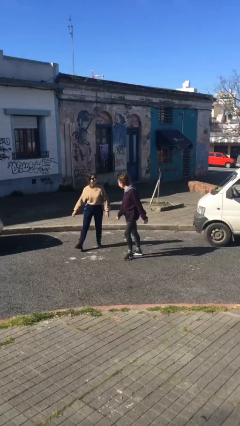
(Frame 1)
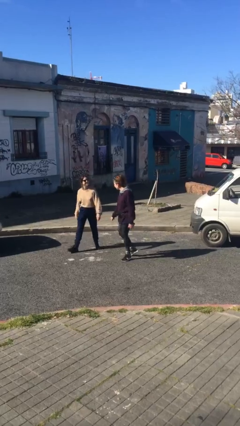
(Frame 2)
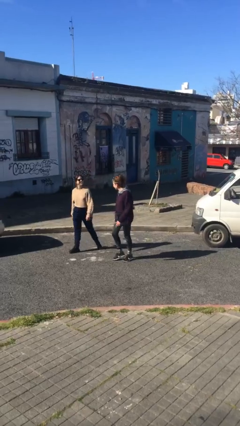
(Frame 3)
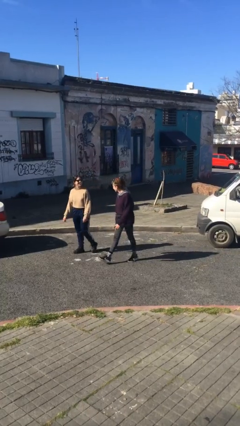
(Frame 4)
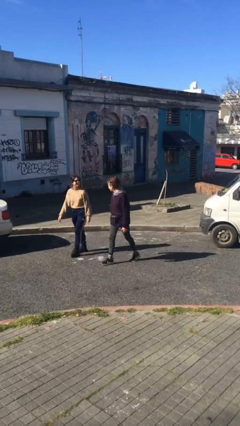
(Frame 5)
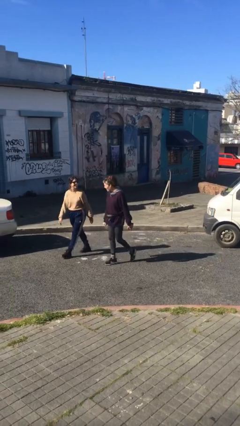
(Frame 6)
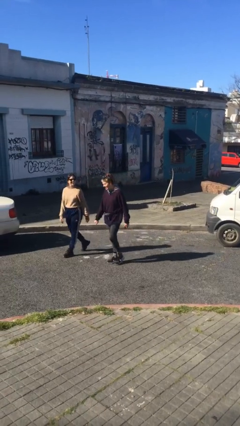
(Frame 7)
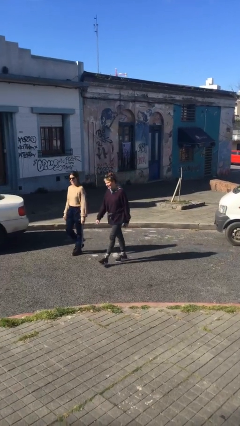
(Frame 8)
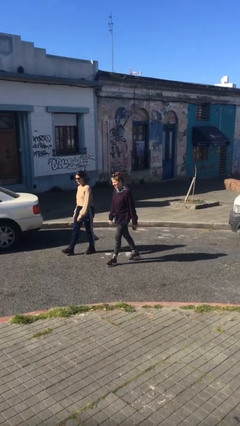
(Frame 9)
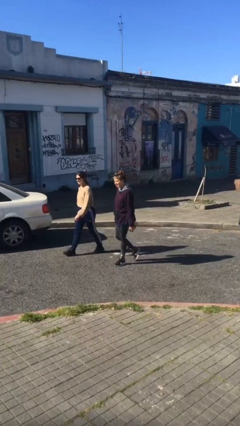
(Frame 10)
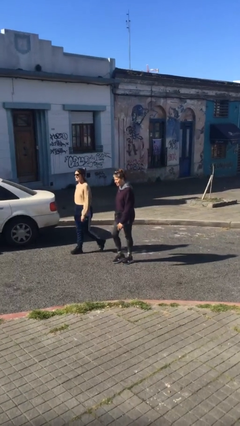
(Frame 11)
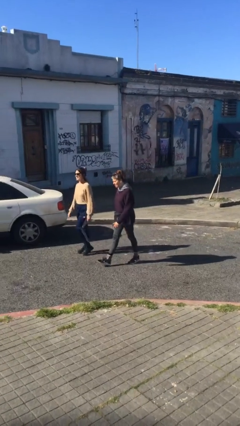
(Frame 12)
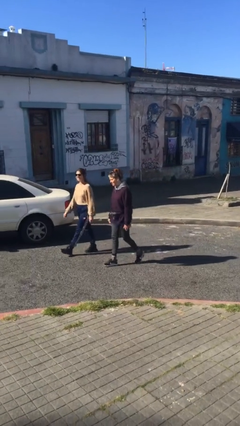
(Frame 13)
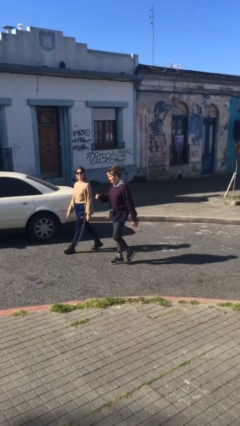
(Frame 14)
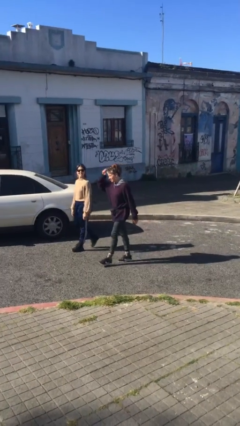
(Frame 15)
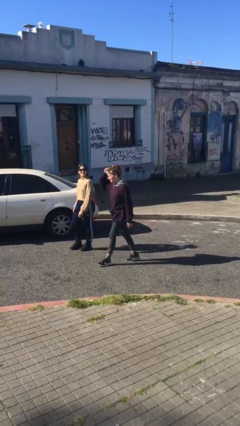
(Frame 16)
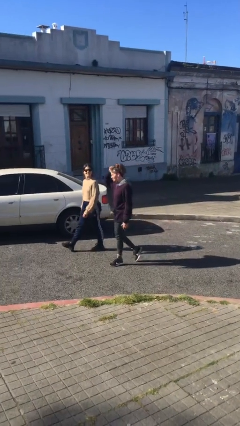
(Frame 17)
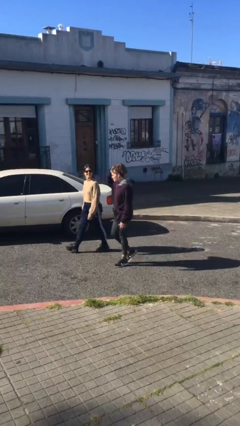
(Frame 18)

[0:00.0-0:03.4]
person talks to person

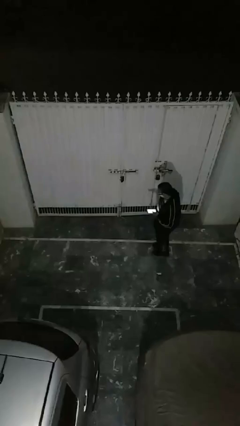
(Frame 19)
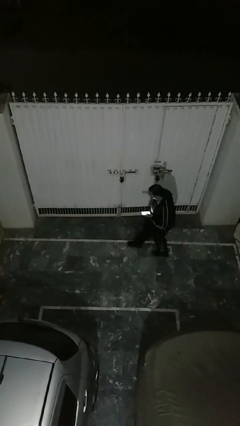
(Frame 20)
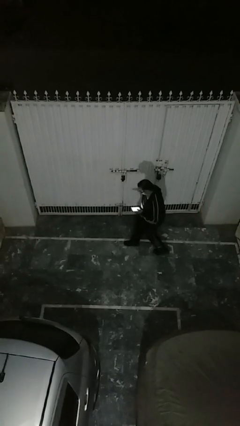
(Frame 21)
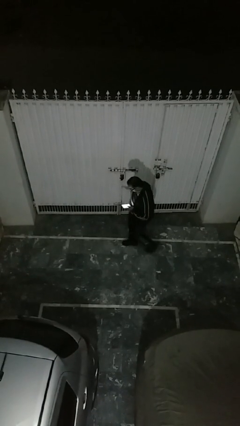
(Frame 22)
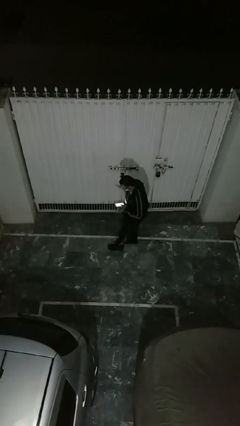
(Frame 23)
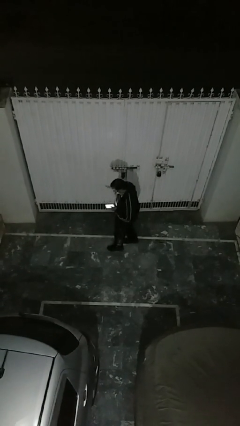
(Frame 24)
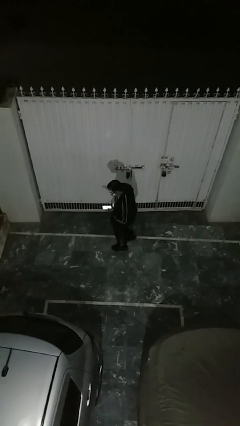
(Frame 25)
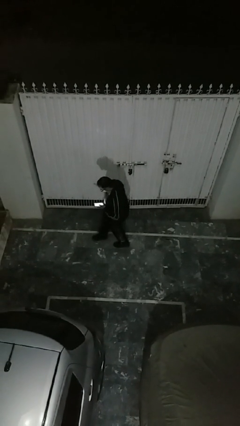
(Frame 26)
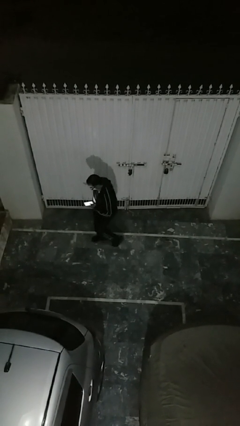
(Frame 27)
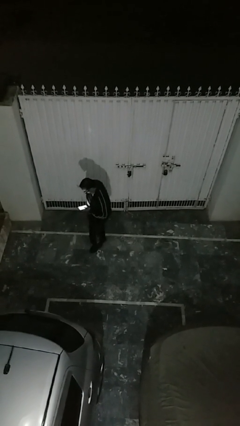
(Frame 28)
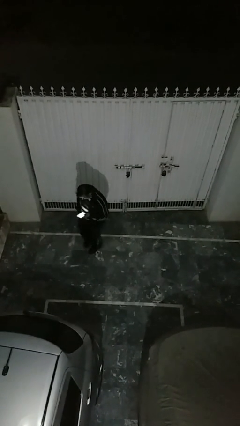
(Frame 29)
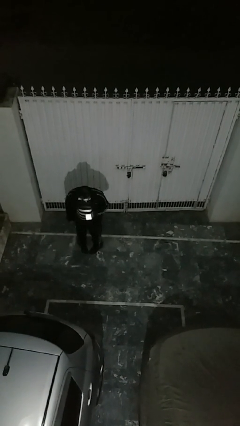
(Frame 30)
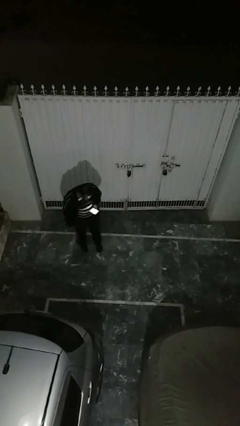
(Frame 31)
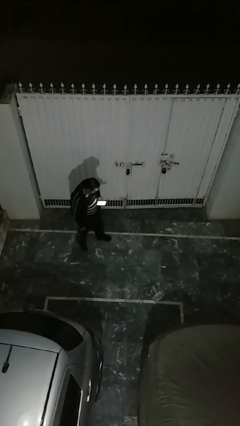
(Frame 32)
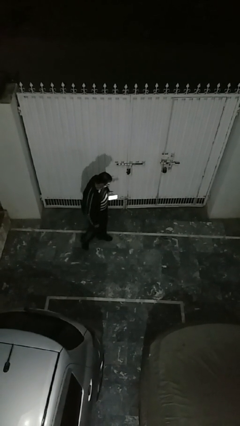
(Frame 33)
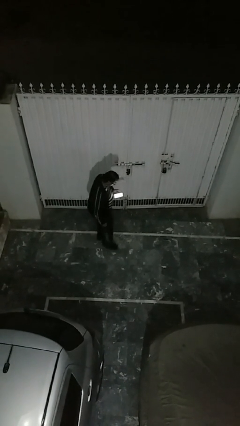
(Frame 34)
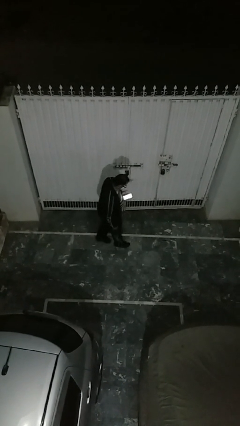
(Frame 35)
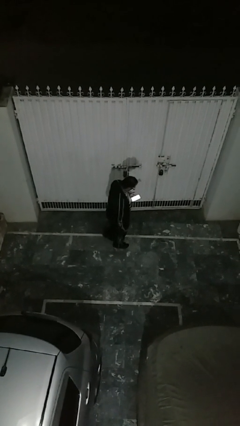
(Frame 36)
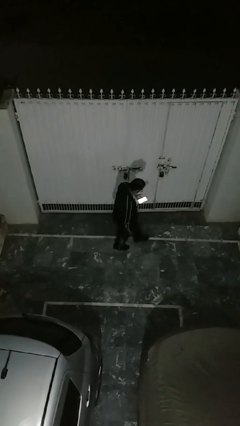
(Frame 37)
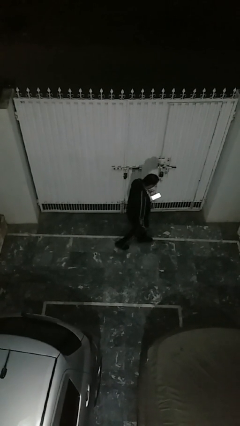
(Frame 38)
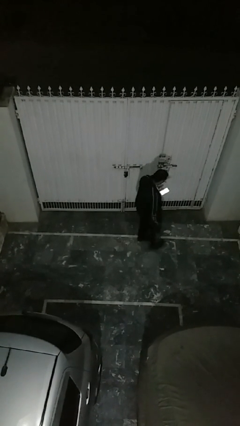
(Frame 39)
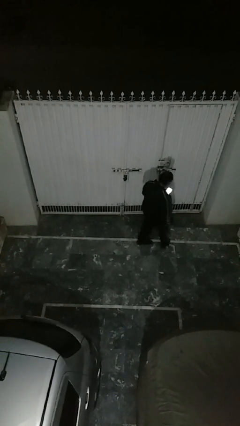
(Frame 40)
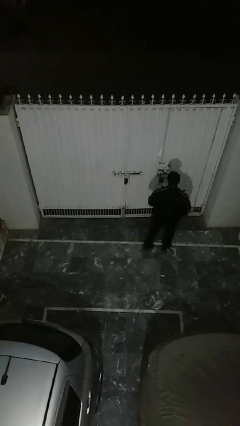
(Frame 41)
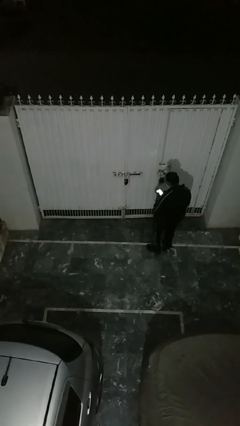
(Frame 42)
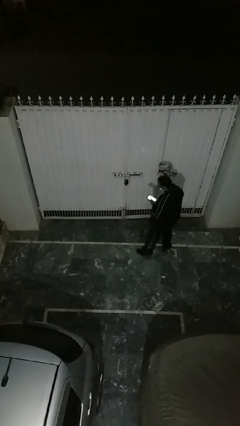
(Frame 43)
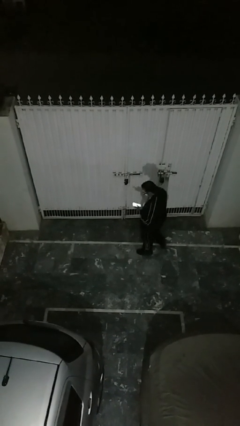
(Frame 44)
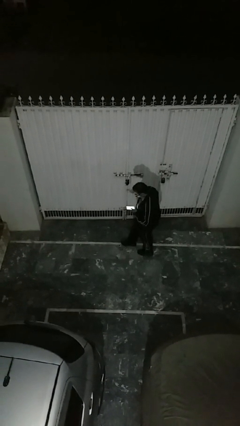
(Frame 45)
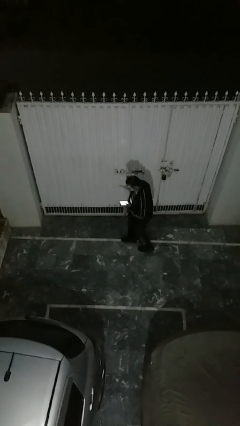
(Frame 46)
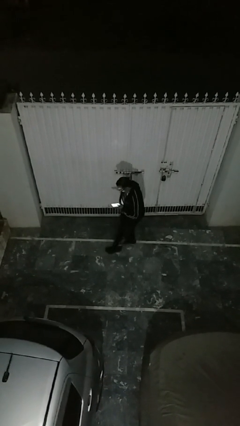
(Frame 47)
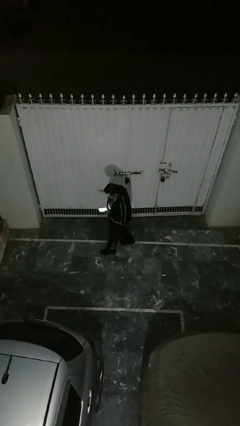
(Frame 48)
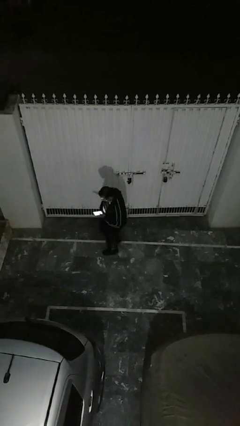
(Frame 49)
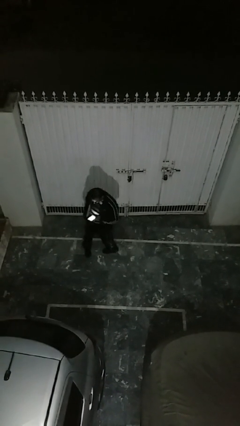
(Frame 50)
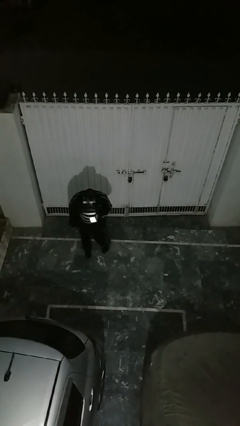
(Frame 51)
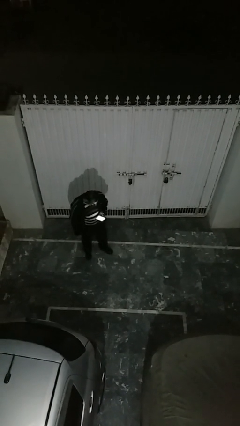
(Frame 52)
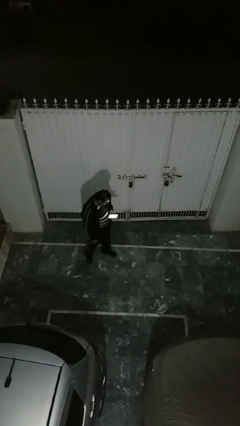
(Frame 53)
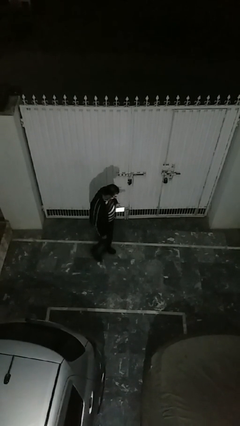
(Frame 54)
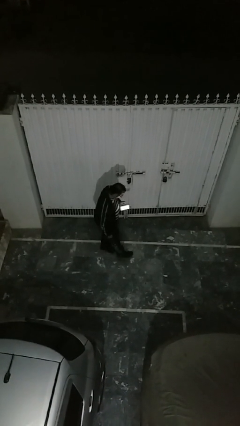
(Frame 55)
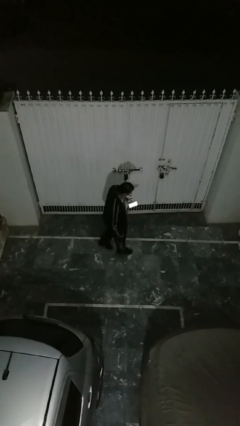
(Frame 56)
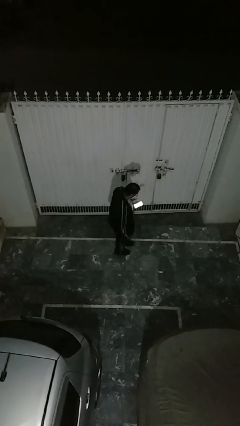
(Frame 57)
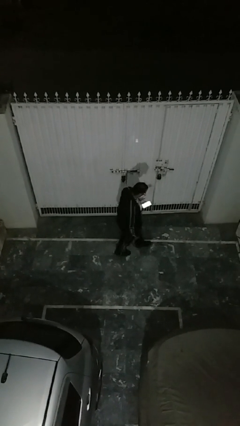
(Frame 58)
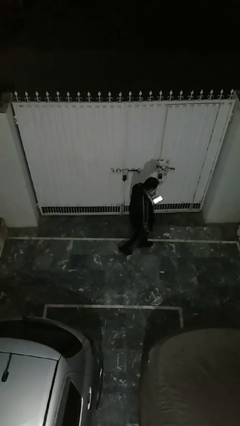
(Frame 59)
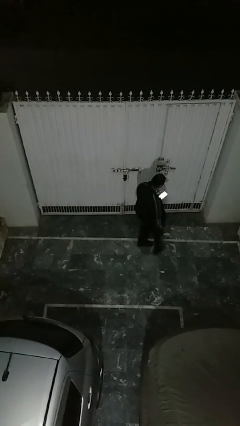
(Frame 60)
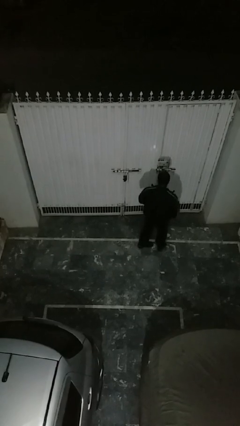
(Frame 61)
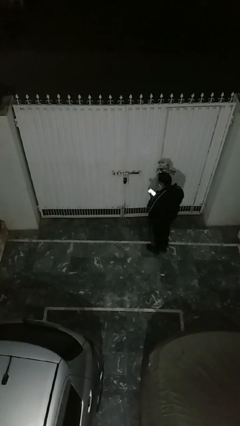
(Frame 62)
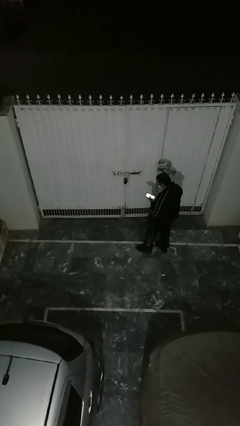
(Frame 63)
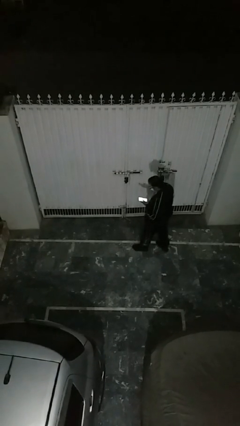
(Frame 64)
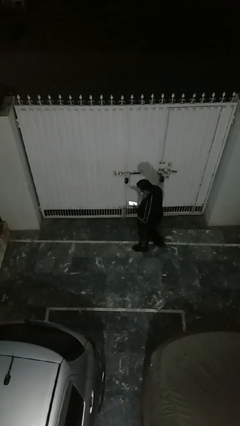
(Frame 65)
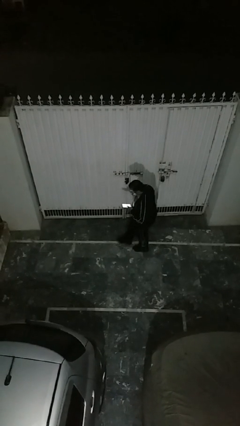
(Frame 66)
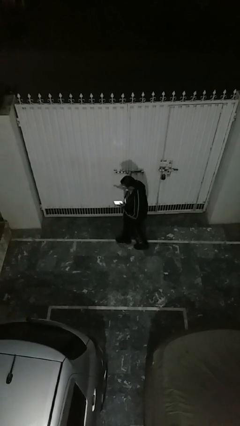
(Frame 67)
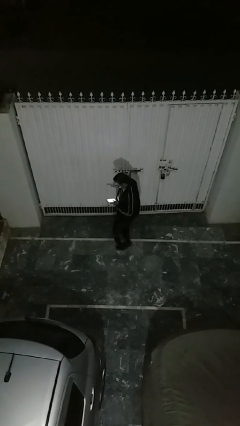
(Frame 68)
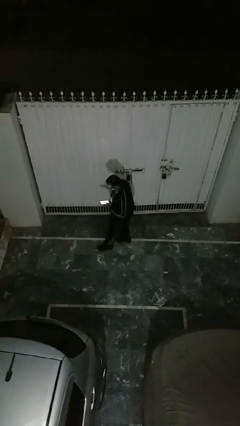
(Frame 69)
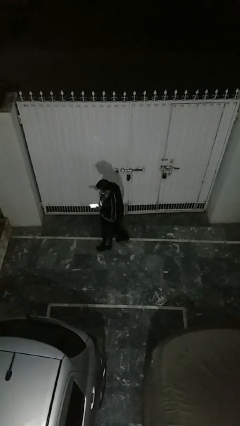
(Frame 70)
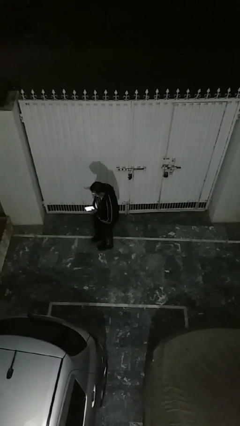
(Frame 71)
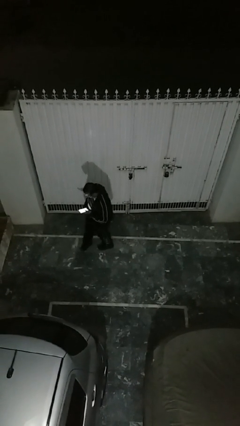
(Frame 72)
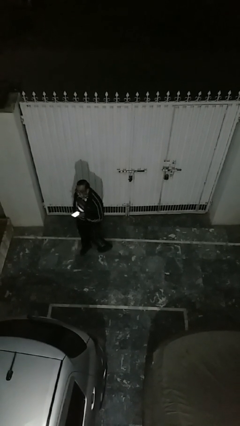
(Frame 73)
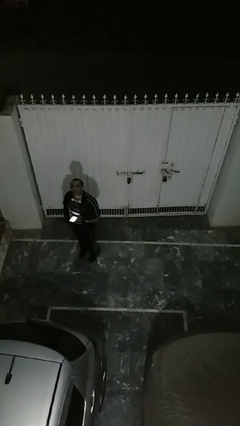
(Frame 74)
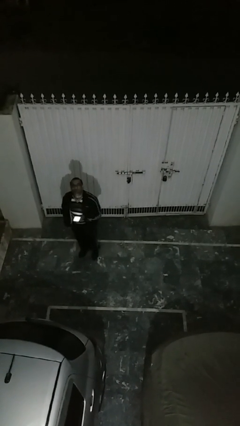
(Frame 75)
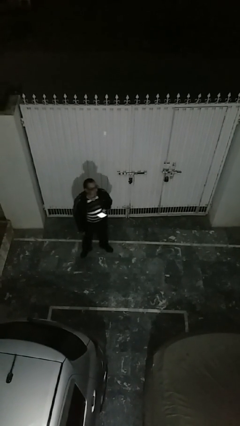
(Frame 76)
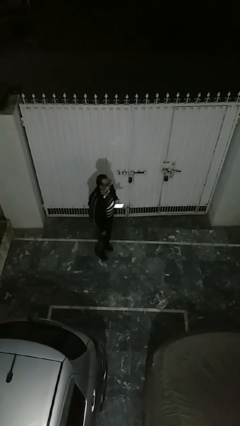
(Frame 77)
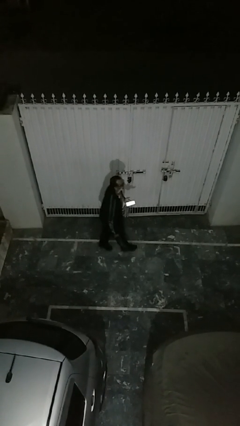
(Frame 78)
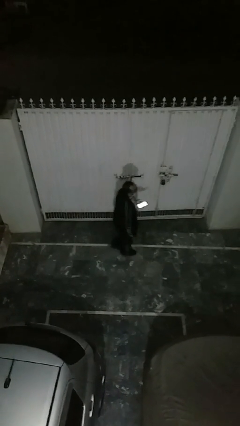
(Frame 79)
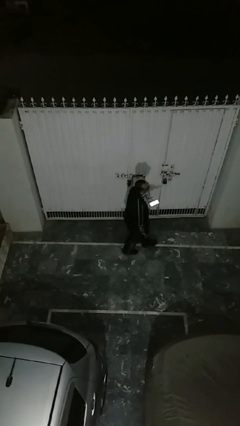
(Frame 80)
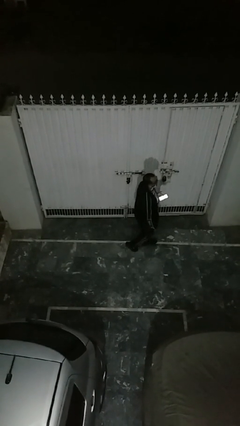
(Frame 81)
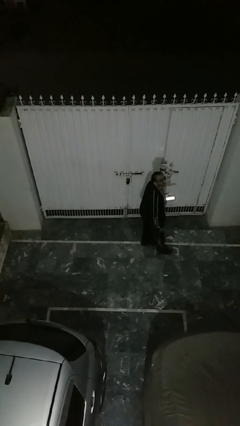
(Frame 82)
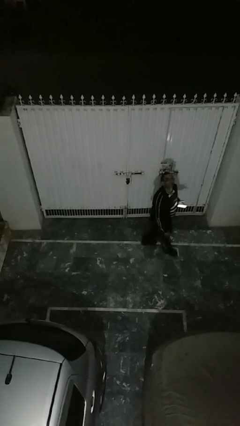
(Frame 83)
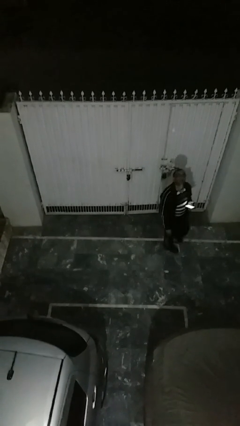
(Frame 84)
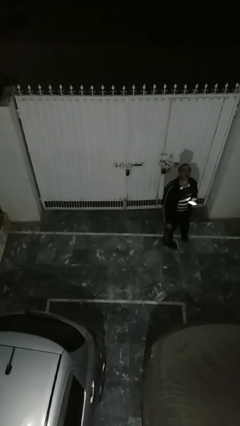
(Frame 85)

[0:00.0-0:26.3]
person texts on phone

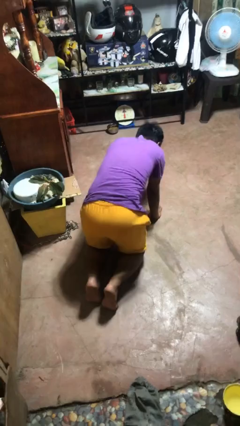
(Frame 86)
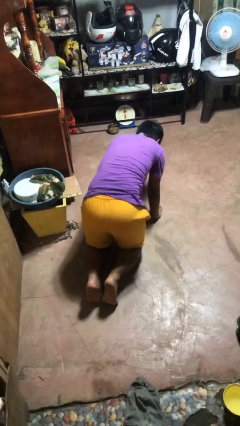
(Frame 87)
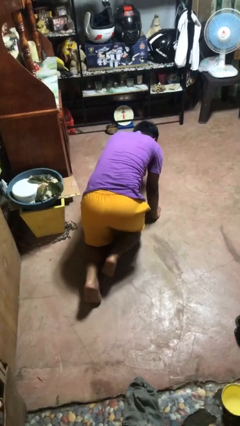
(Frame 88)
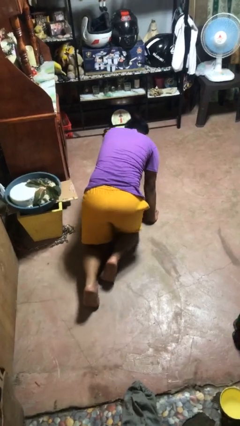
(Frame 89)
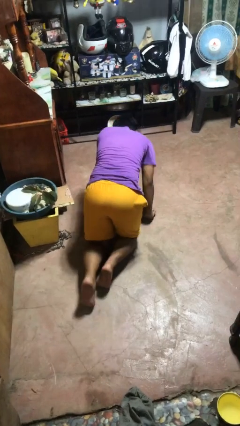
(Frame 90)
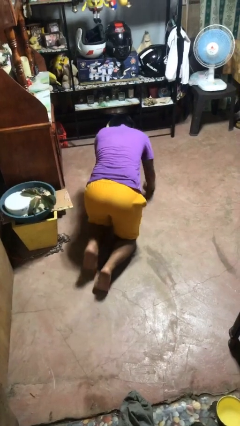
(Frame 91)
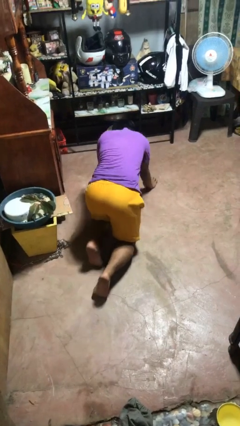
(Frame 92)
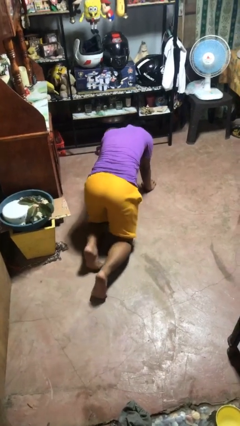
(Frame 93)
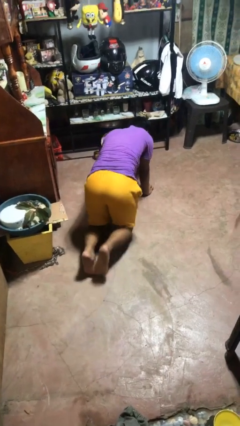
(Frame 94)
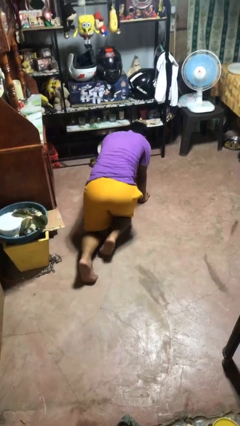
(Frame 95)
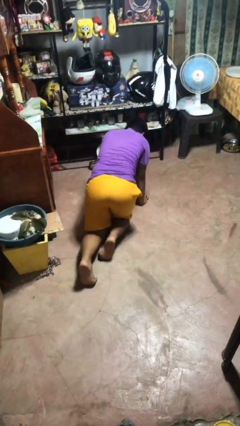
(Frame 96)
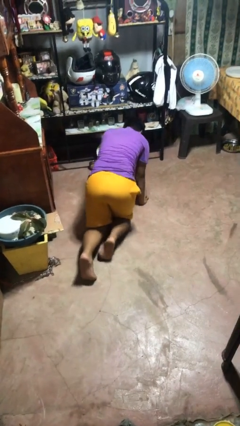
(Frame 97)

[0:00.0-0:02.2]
person crawls
